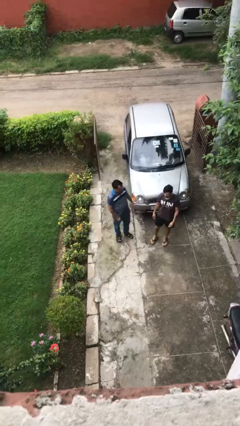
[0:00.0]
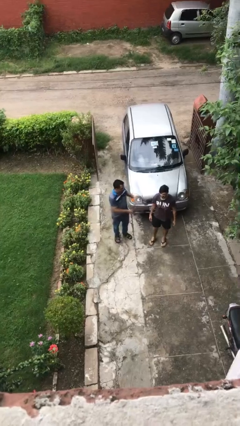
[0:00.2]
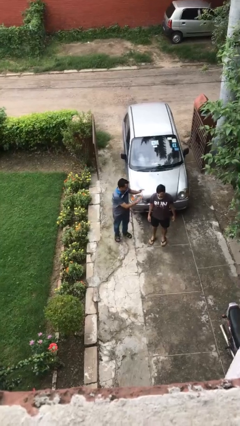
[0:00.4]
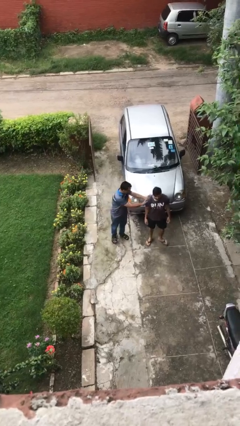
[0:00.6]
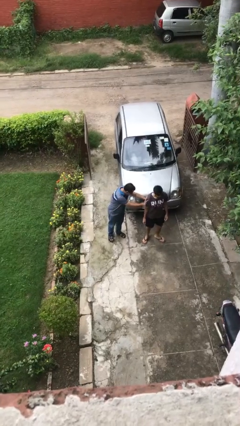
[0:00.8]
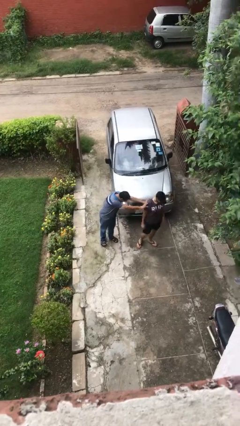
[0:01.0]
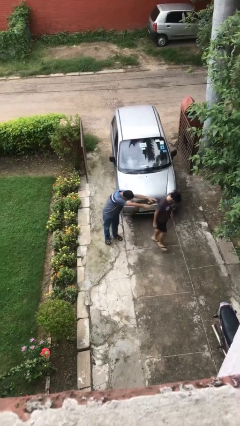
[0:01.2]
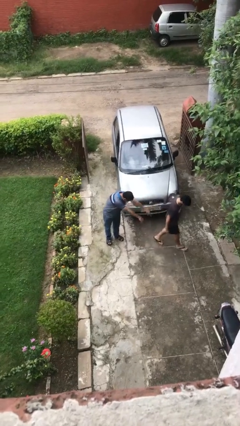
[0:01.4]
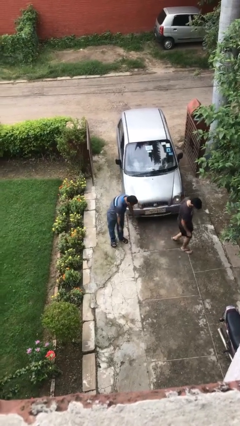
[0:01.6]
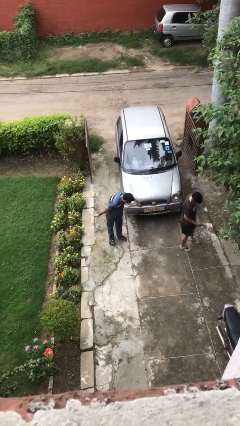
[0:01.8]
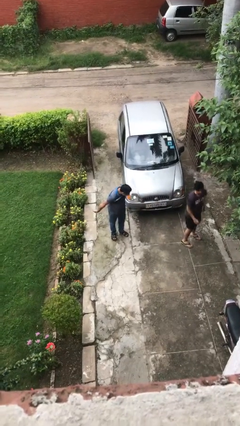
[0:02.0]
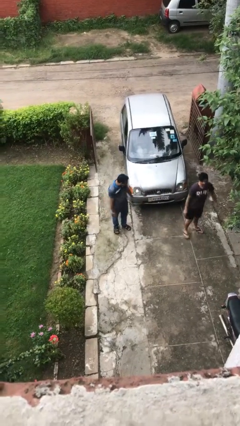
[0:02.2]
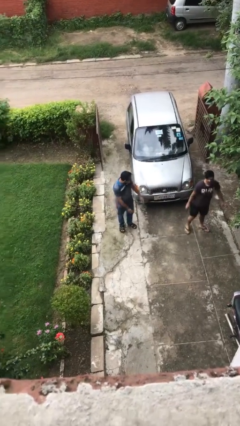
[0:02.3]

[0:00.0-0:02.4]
person shoves person

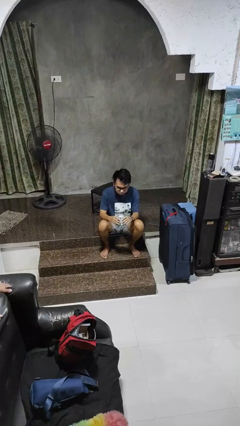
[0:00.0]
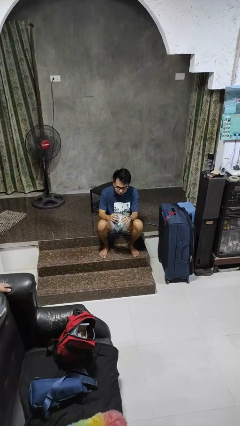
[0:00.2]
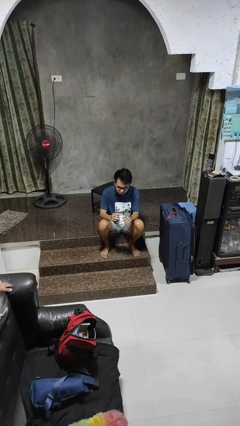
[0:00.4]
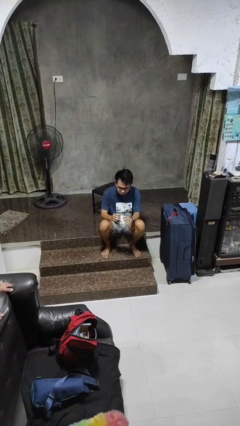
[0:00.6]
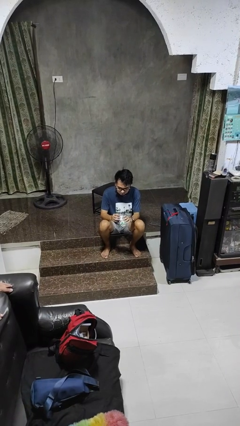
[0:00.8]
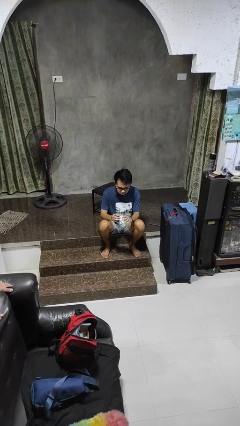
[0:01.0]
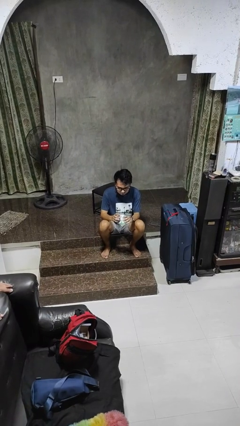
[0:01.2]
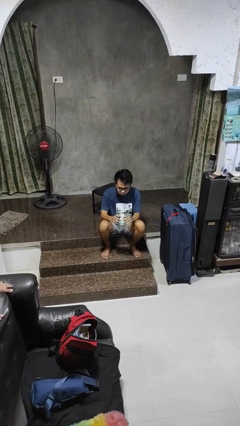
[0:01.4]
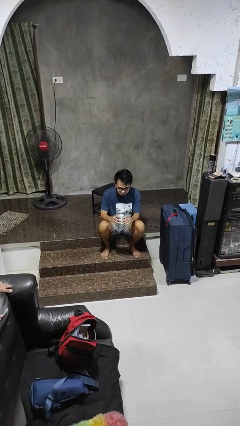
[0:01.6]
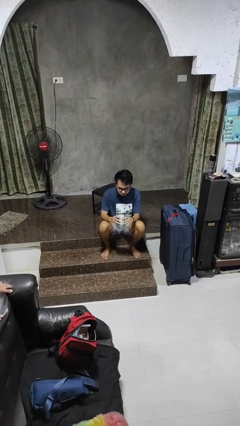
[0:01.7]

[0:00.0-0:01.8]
person opens beverage can

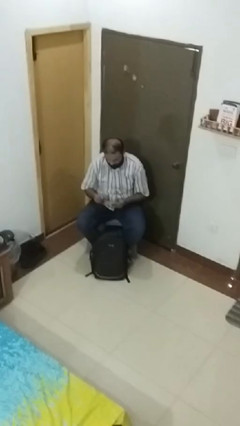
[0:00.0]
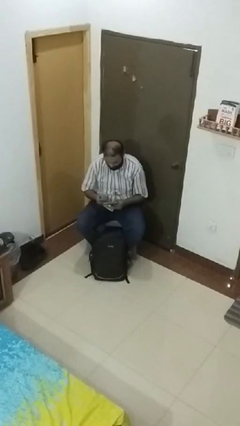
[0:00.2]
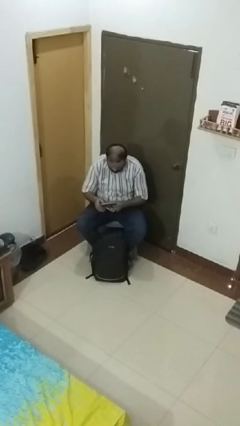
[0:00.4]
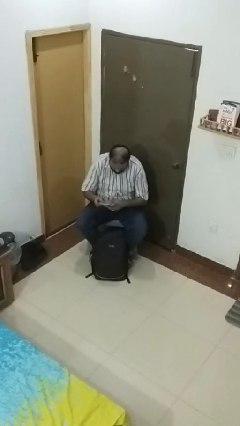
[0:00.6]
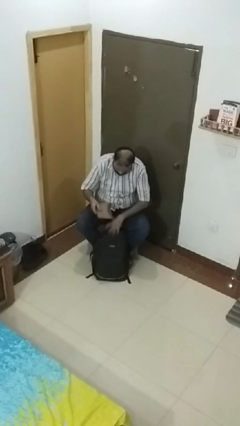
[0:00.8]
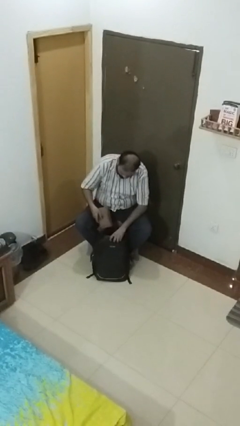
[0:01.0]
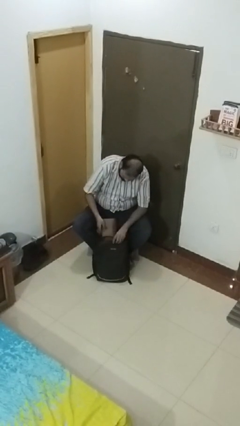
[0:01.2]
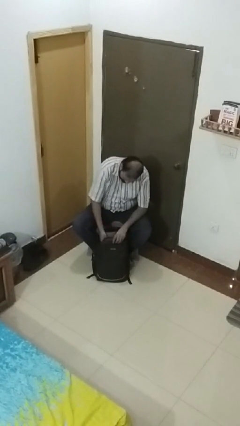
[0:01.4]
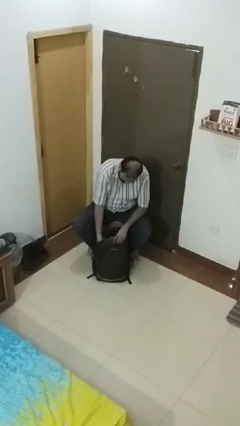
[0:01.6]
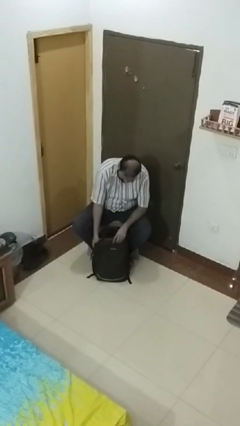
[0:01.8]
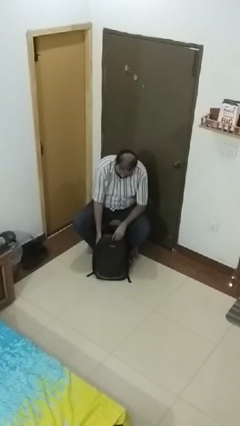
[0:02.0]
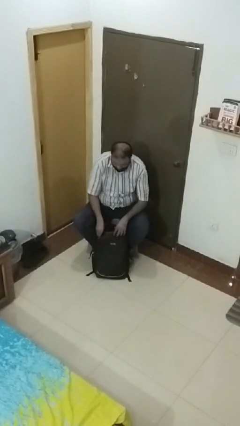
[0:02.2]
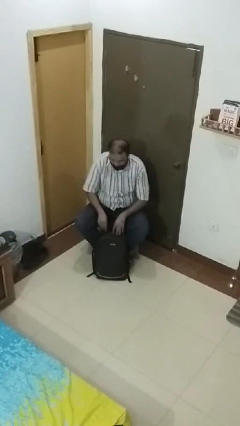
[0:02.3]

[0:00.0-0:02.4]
person puts object into backpack

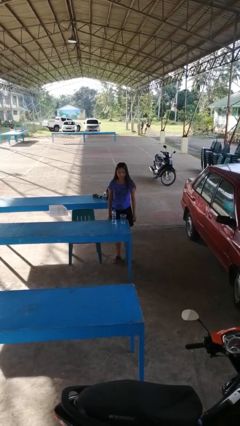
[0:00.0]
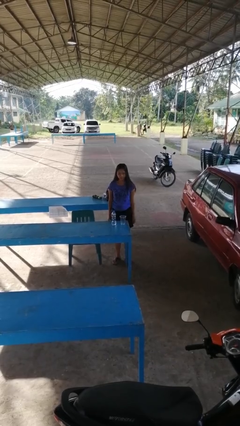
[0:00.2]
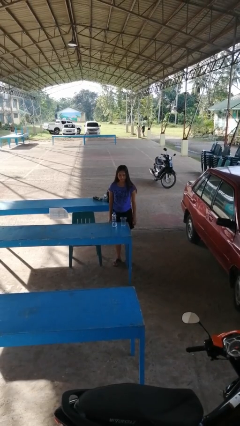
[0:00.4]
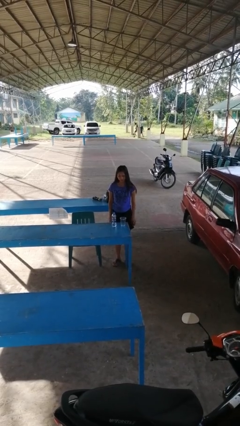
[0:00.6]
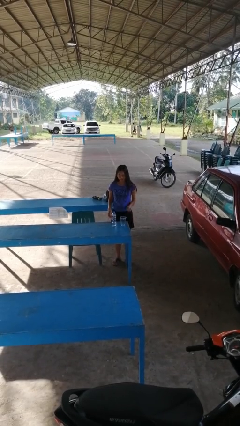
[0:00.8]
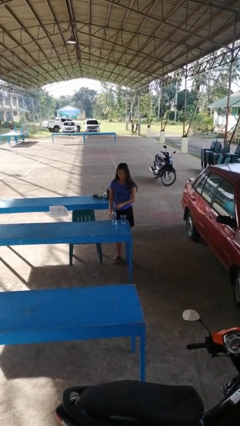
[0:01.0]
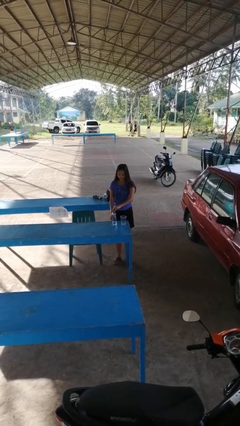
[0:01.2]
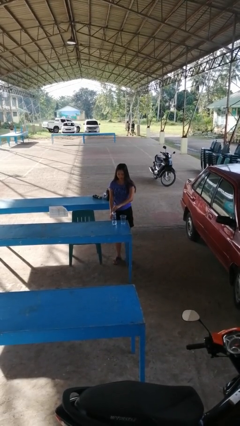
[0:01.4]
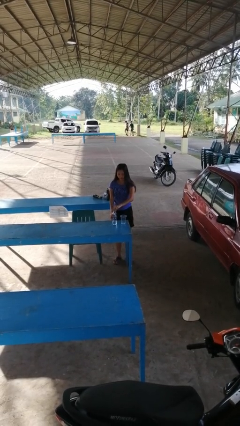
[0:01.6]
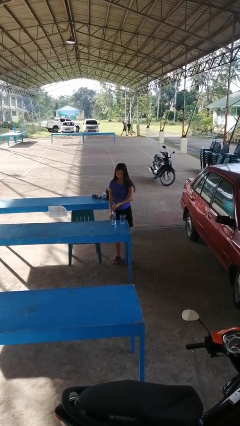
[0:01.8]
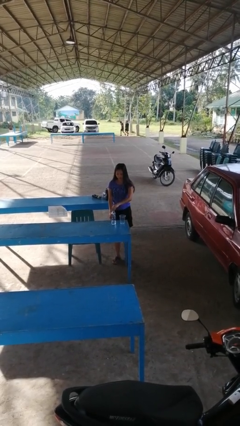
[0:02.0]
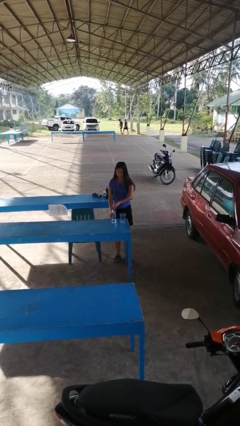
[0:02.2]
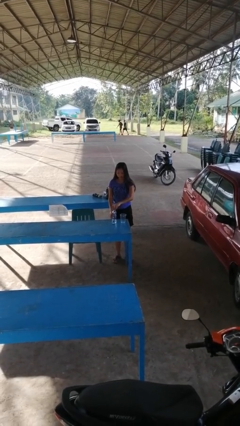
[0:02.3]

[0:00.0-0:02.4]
person unscrews lid from bottle

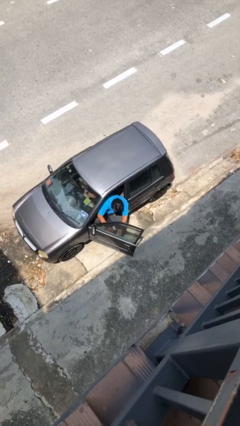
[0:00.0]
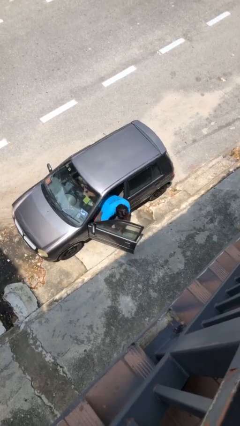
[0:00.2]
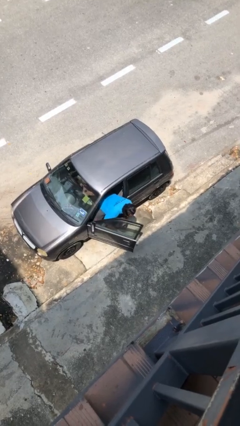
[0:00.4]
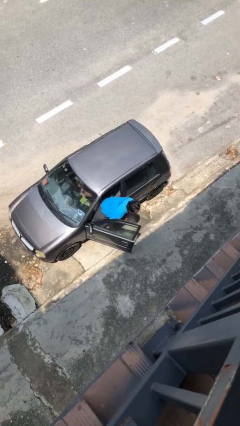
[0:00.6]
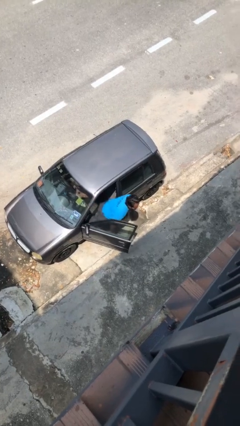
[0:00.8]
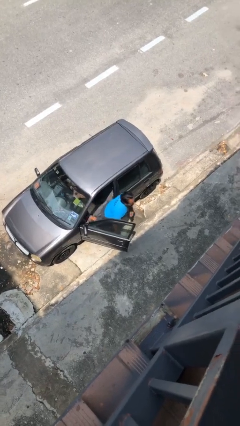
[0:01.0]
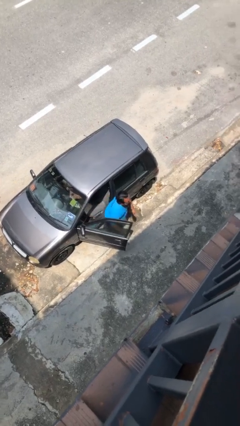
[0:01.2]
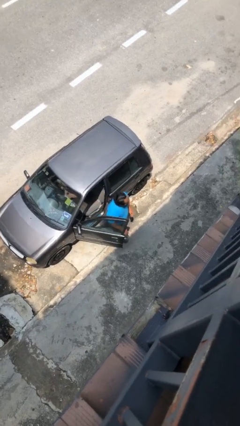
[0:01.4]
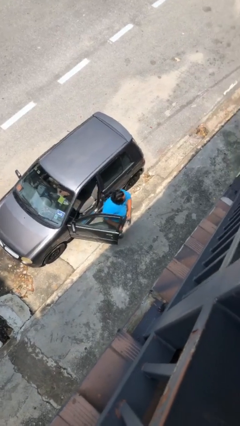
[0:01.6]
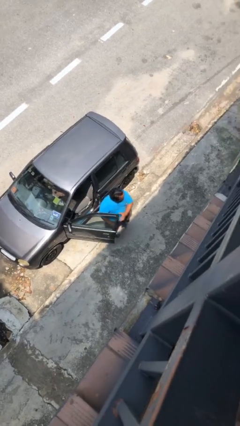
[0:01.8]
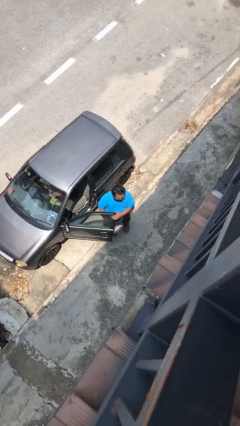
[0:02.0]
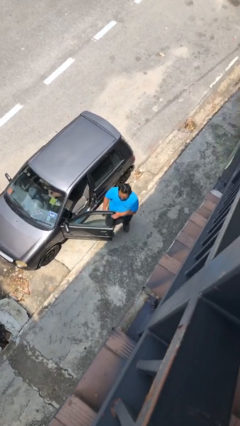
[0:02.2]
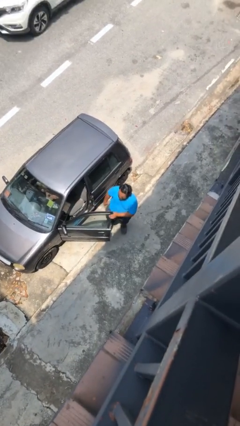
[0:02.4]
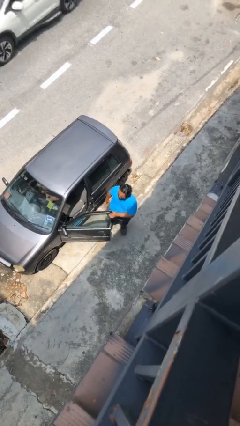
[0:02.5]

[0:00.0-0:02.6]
person exits car

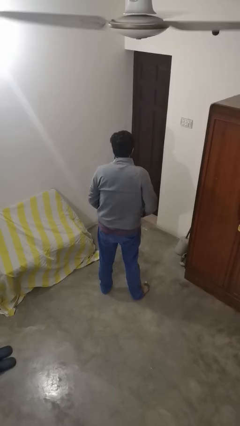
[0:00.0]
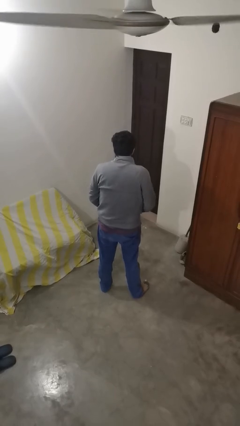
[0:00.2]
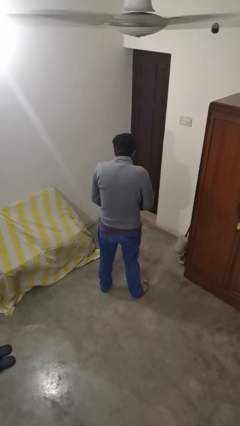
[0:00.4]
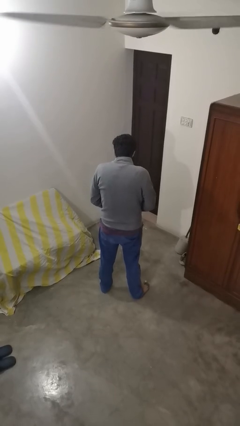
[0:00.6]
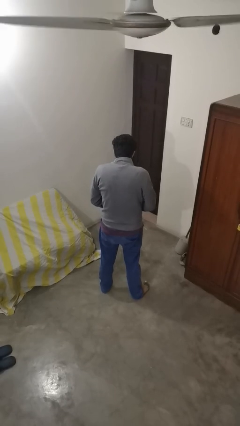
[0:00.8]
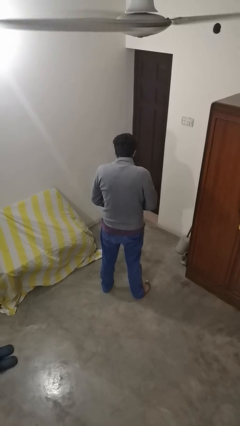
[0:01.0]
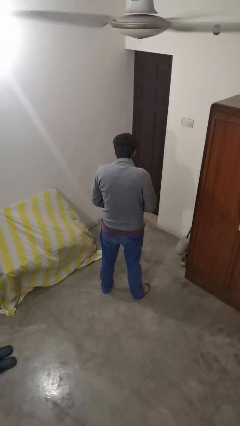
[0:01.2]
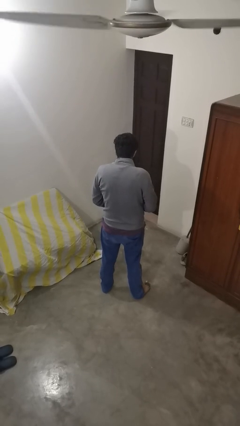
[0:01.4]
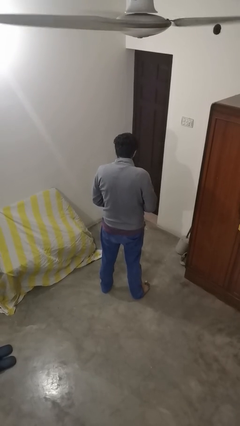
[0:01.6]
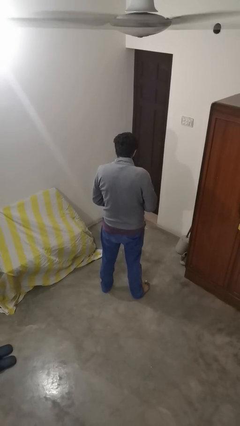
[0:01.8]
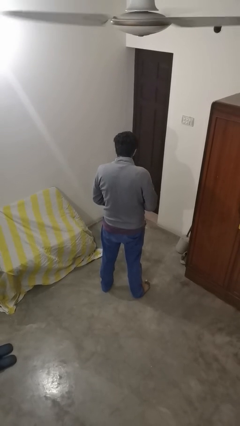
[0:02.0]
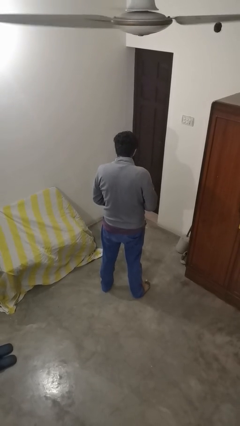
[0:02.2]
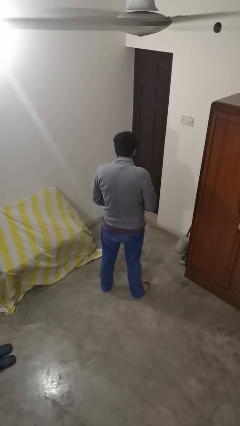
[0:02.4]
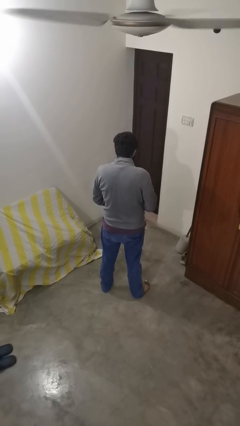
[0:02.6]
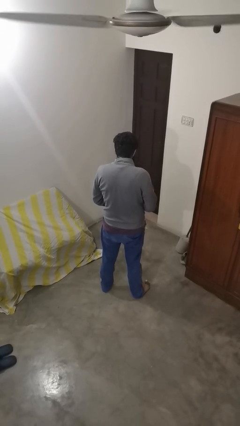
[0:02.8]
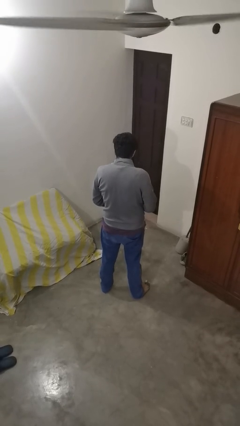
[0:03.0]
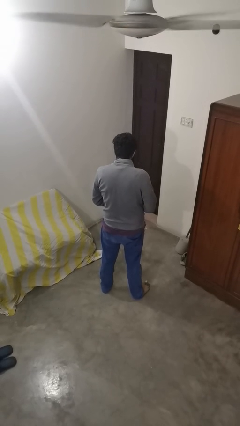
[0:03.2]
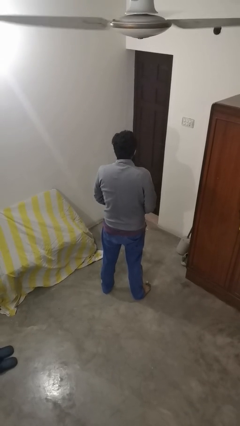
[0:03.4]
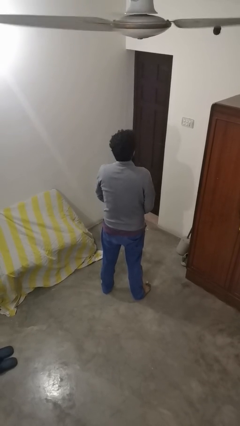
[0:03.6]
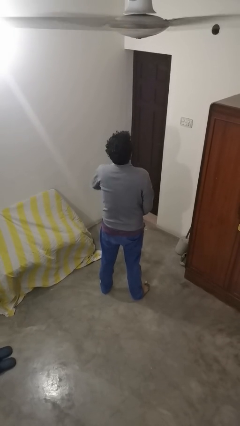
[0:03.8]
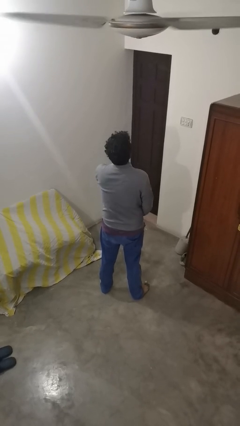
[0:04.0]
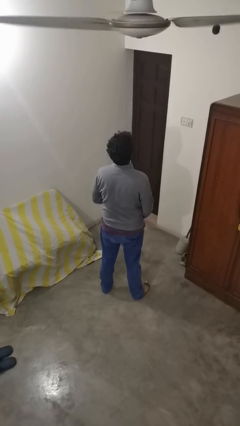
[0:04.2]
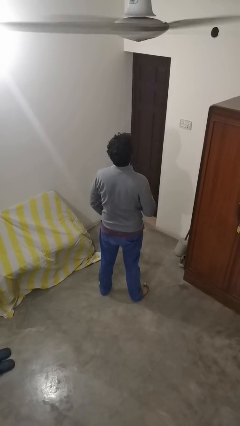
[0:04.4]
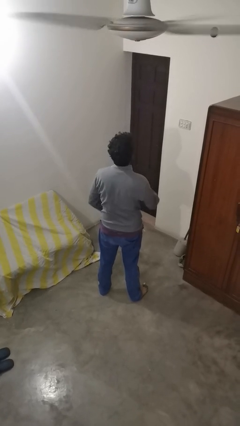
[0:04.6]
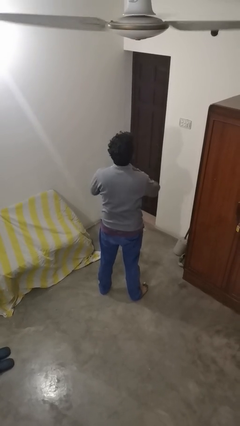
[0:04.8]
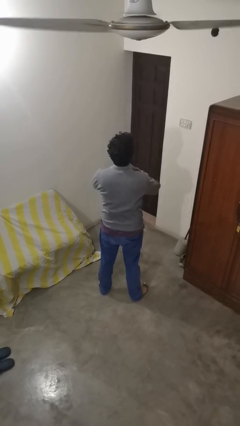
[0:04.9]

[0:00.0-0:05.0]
person zips up jacket

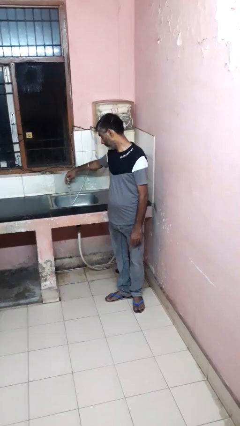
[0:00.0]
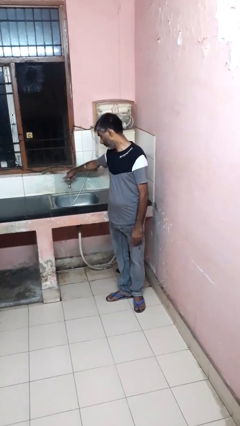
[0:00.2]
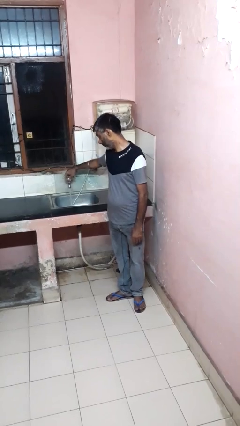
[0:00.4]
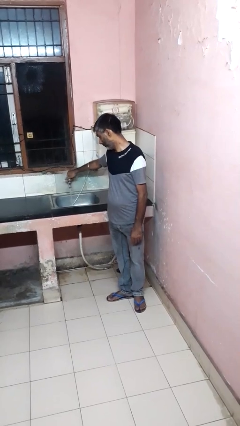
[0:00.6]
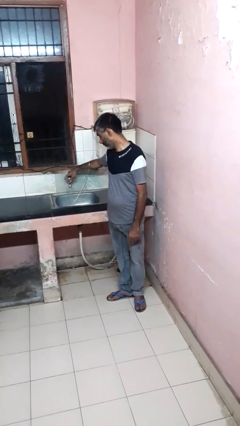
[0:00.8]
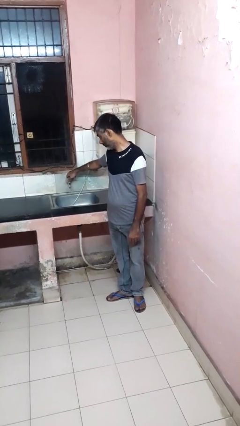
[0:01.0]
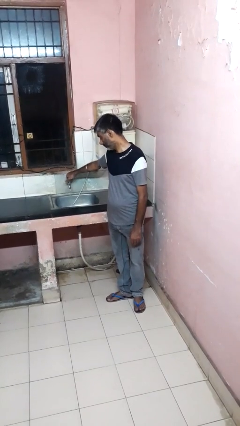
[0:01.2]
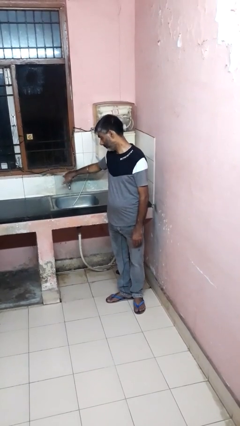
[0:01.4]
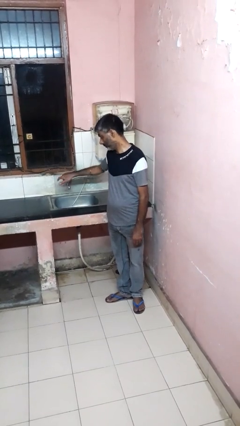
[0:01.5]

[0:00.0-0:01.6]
person turns off faucet
